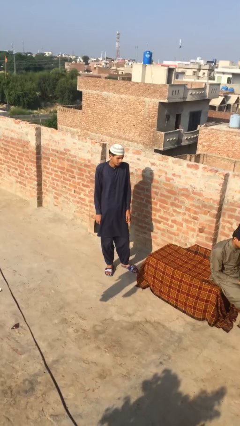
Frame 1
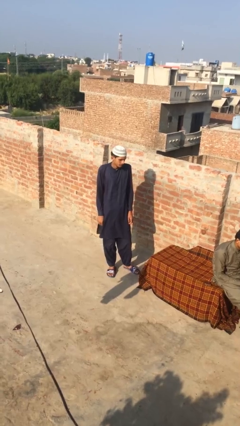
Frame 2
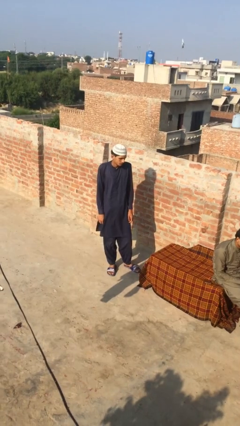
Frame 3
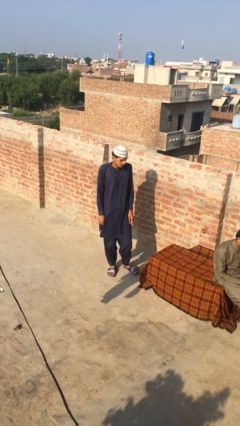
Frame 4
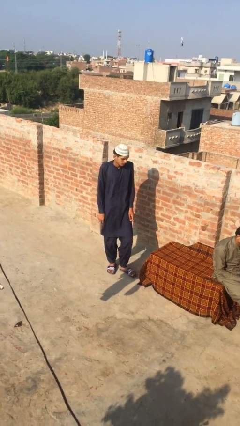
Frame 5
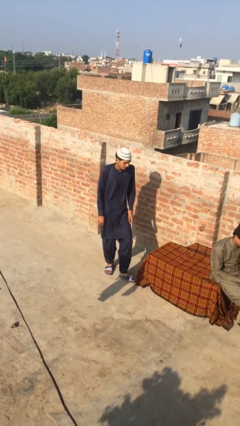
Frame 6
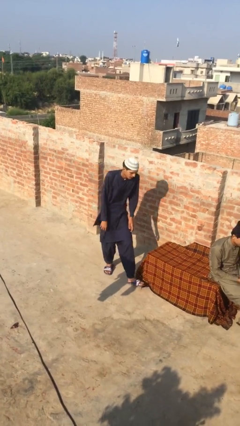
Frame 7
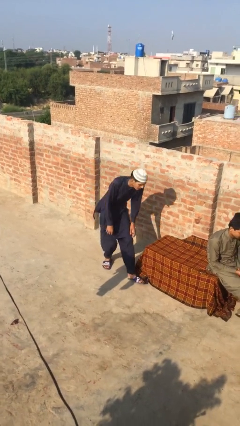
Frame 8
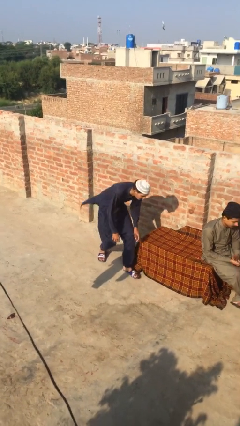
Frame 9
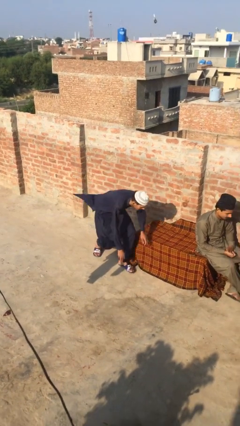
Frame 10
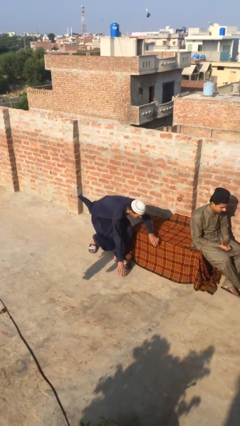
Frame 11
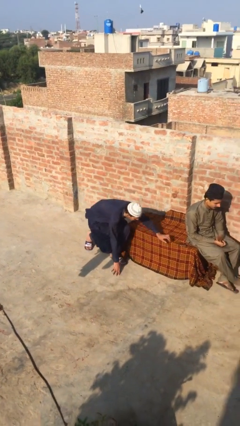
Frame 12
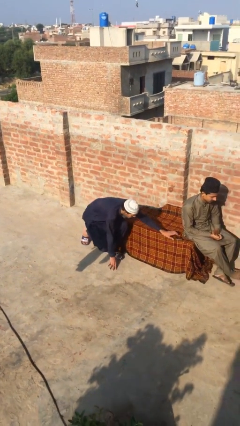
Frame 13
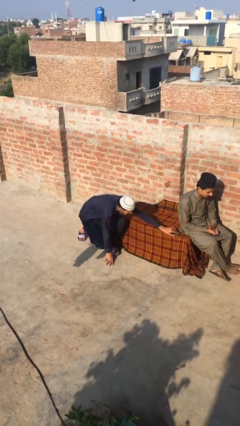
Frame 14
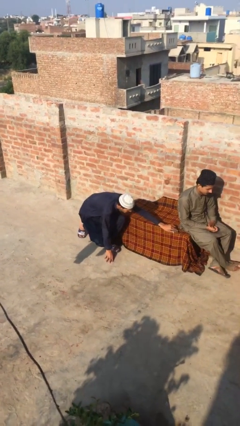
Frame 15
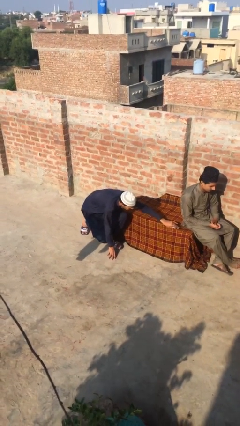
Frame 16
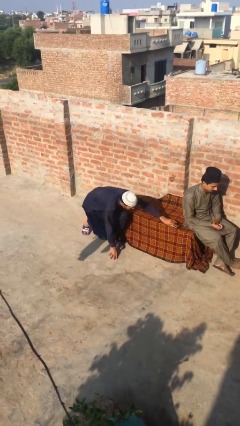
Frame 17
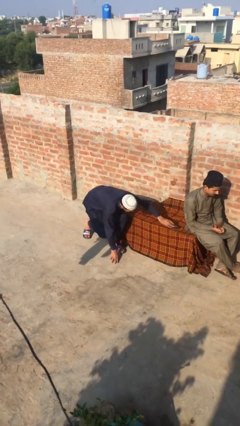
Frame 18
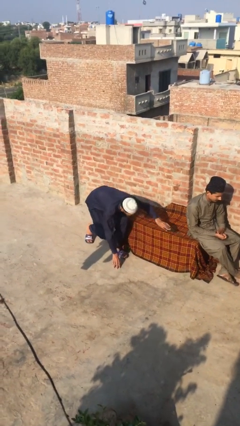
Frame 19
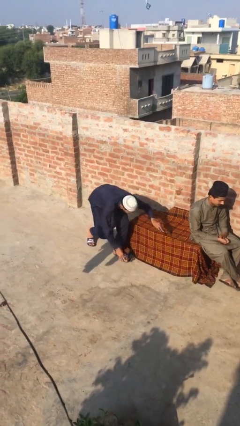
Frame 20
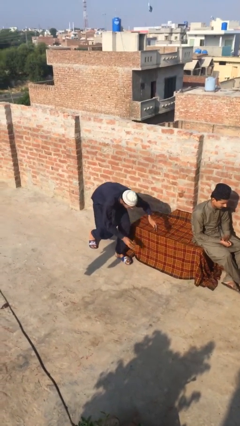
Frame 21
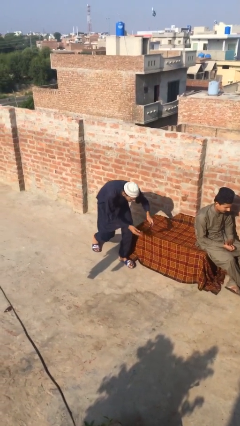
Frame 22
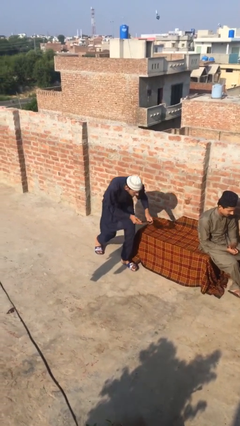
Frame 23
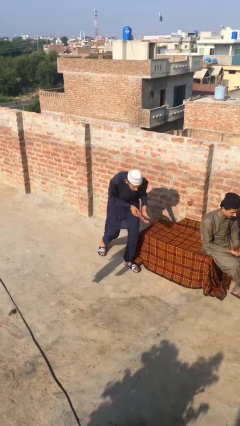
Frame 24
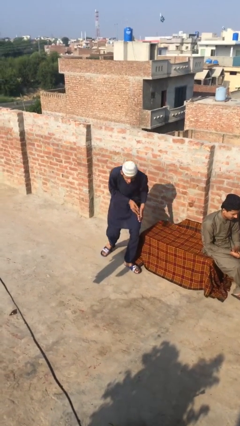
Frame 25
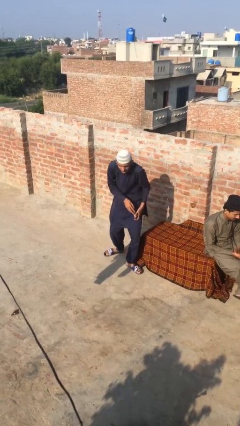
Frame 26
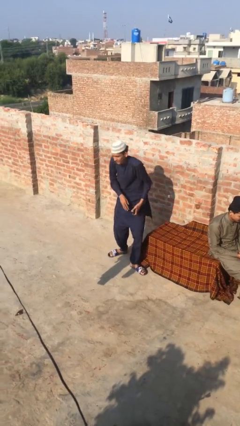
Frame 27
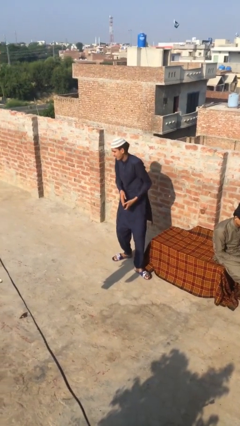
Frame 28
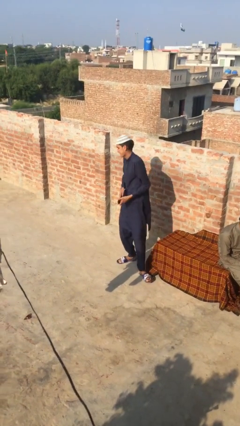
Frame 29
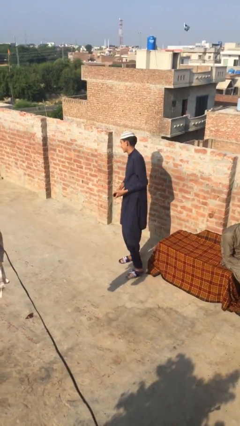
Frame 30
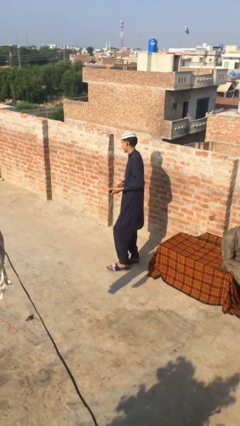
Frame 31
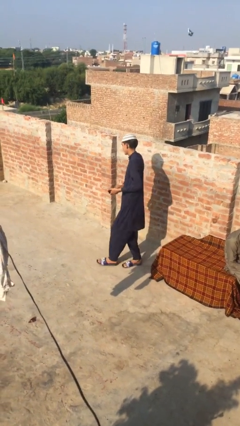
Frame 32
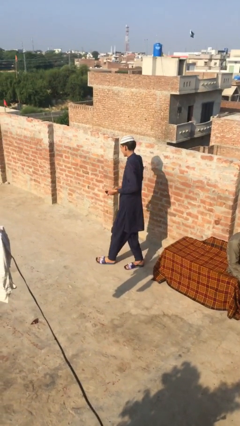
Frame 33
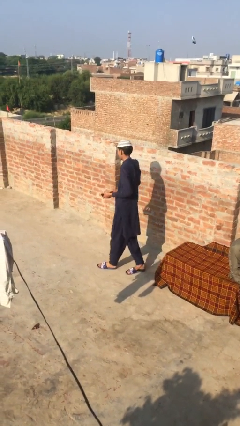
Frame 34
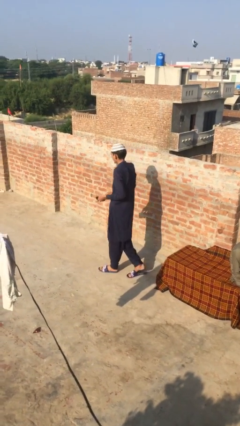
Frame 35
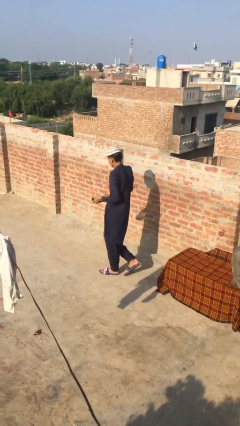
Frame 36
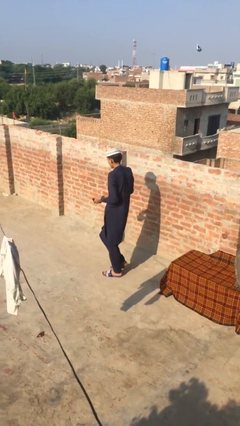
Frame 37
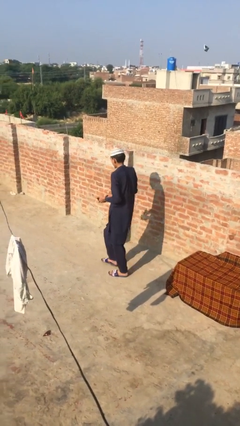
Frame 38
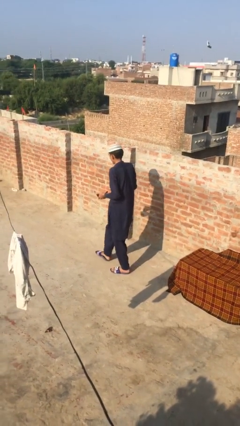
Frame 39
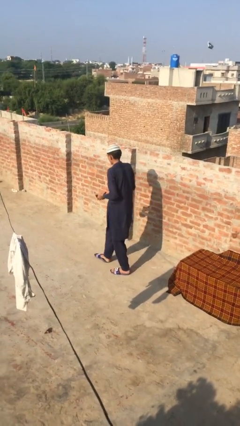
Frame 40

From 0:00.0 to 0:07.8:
person steals object from person

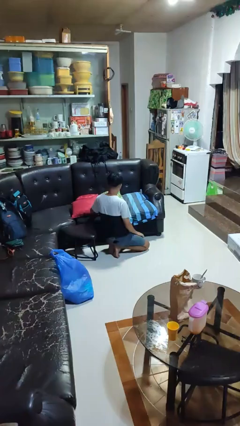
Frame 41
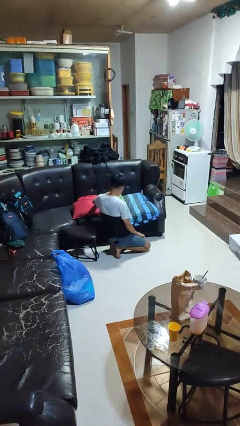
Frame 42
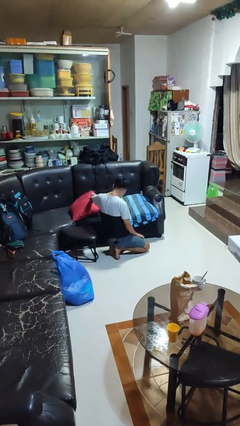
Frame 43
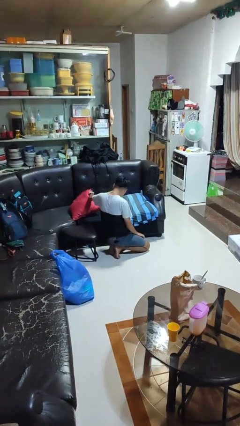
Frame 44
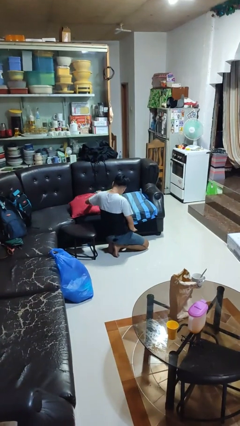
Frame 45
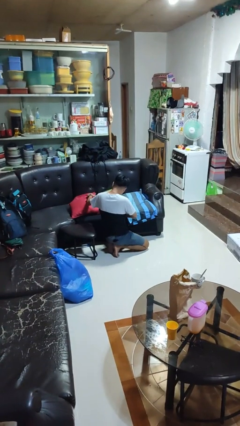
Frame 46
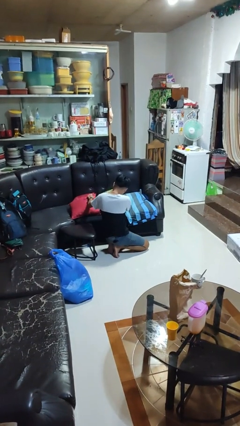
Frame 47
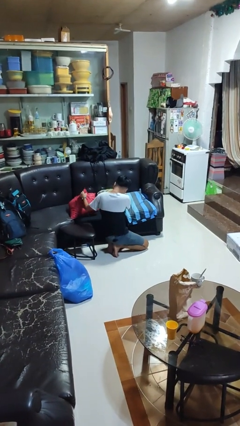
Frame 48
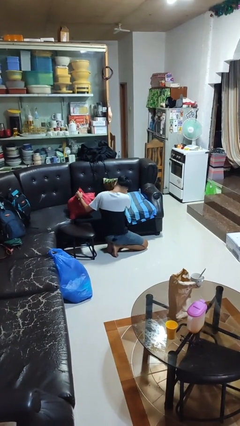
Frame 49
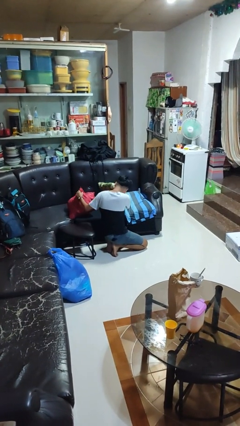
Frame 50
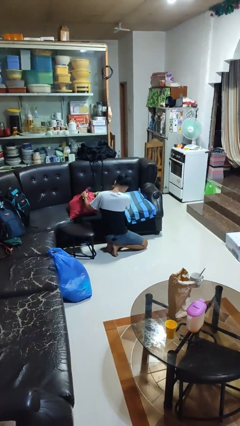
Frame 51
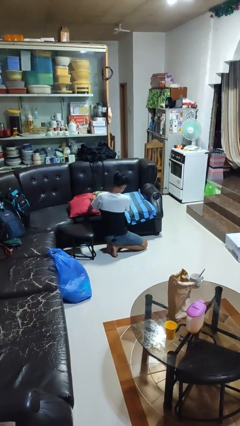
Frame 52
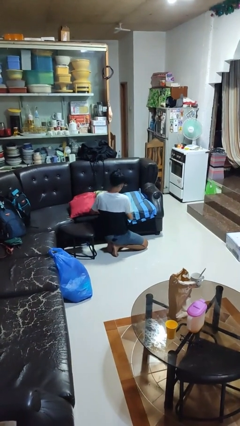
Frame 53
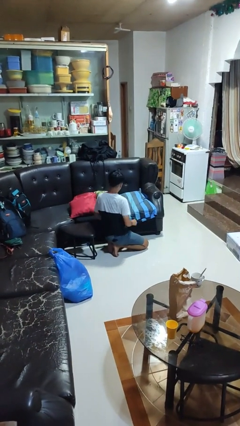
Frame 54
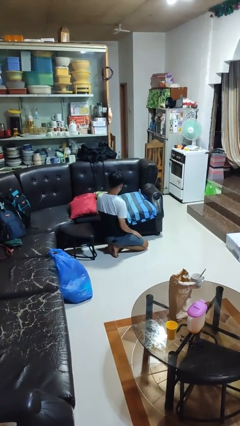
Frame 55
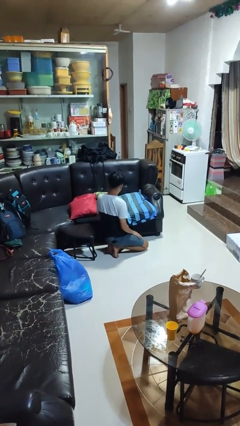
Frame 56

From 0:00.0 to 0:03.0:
person searches in couch

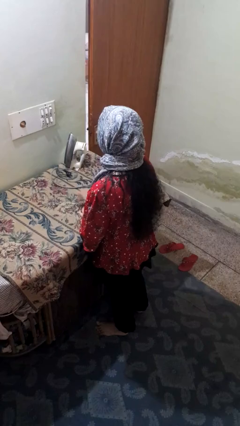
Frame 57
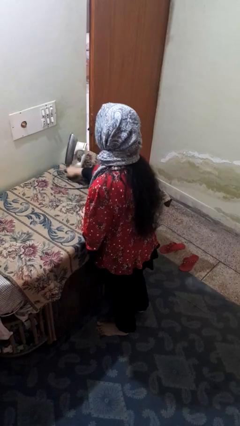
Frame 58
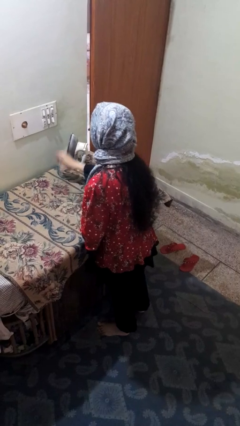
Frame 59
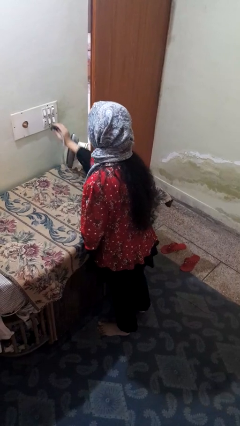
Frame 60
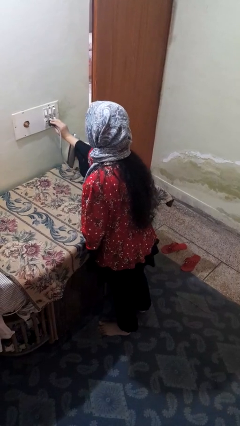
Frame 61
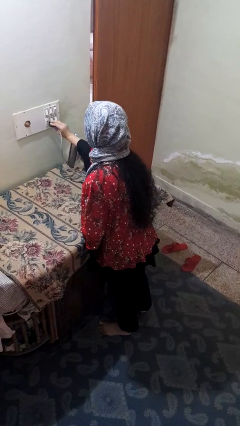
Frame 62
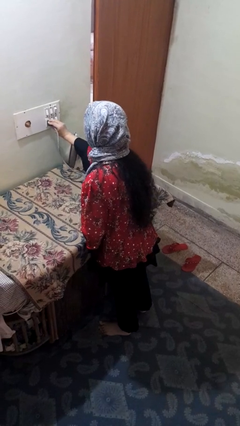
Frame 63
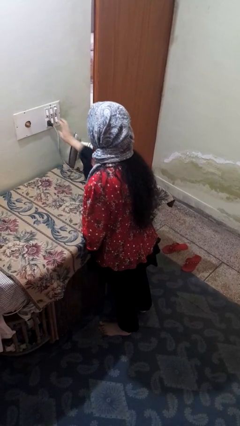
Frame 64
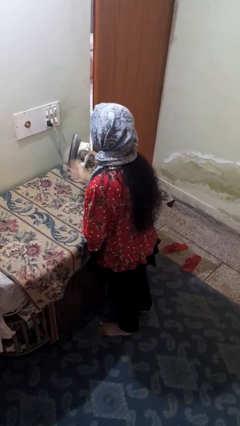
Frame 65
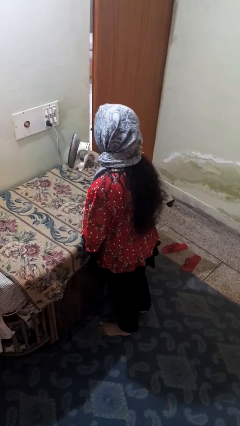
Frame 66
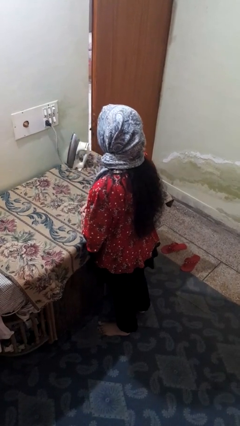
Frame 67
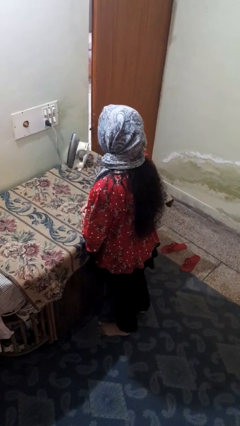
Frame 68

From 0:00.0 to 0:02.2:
person plugs into electrical socket

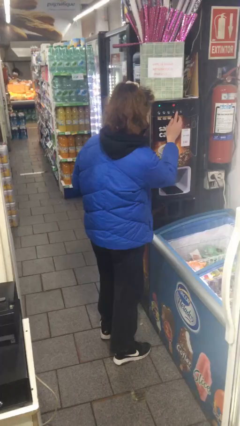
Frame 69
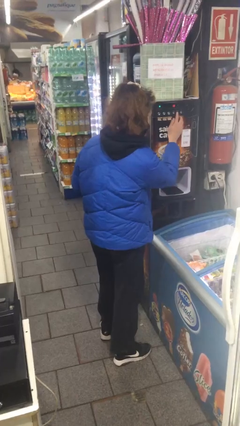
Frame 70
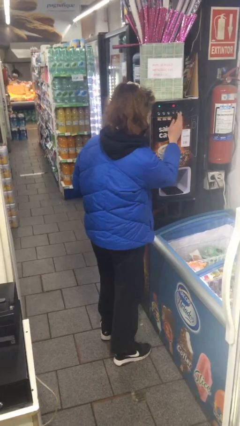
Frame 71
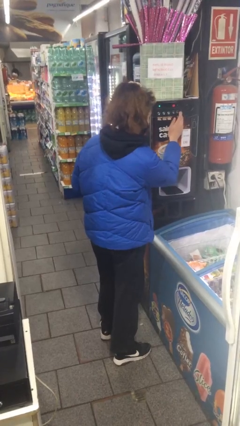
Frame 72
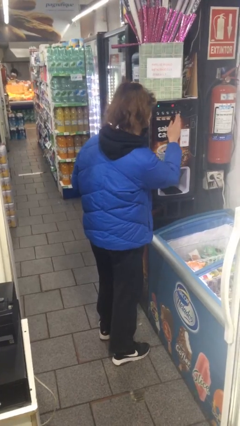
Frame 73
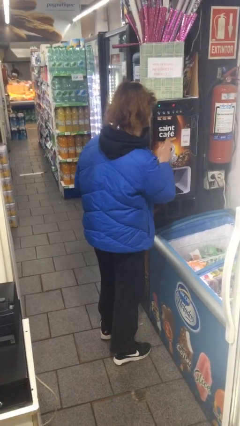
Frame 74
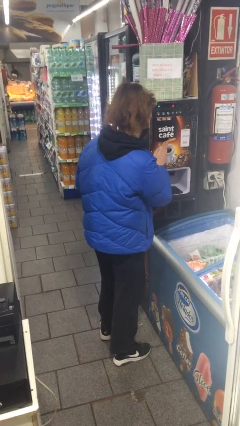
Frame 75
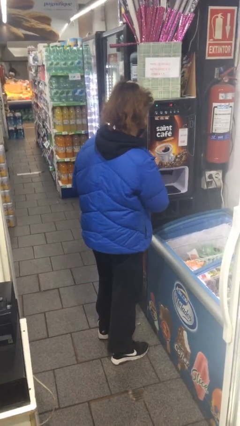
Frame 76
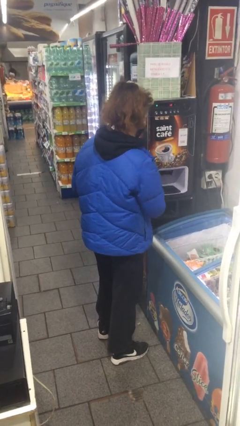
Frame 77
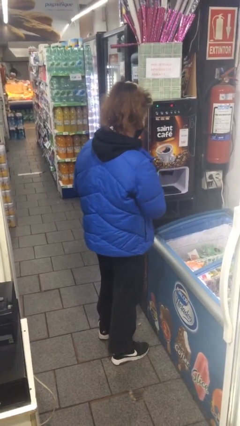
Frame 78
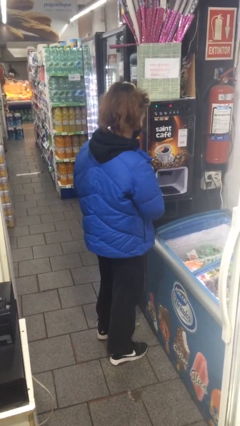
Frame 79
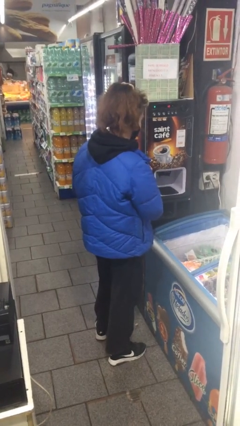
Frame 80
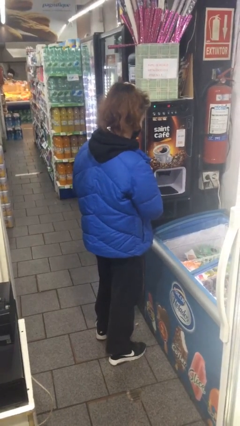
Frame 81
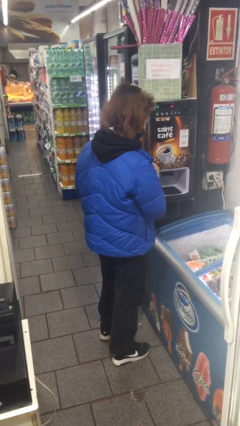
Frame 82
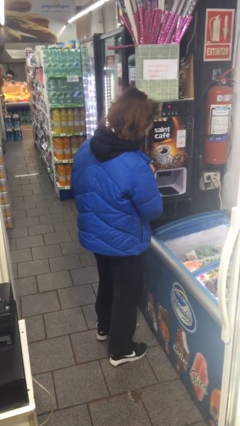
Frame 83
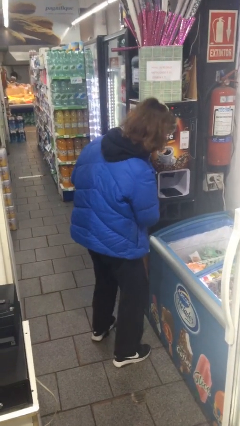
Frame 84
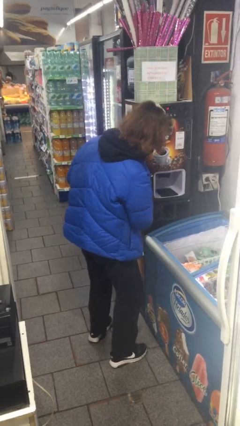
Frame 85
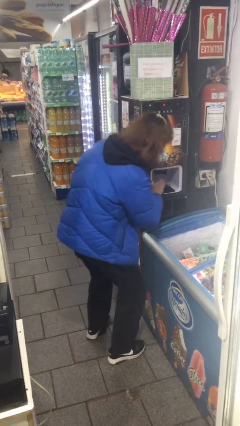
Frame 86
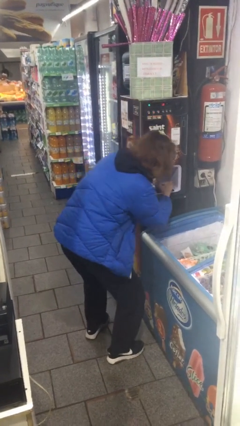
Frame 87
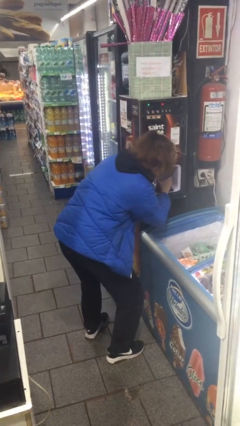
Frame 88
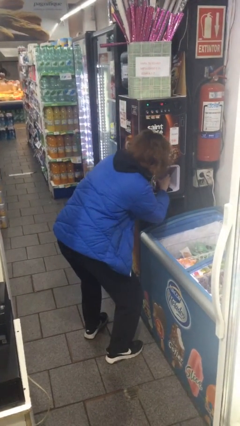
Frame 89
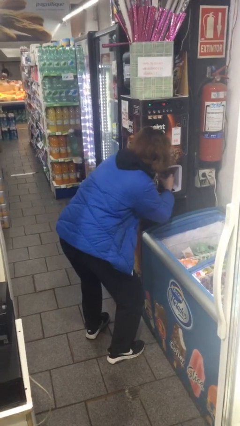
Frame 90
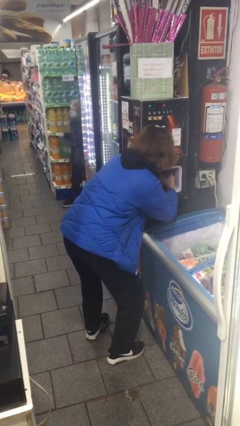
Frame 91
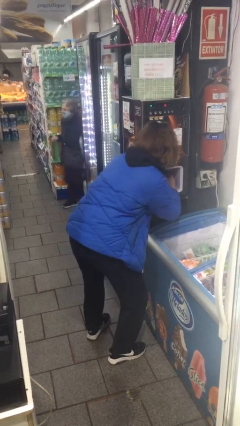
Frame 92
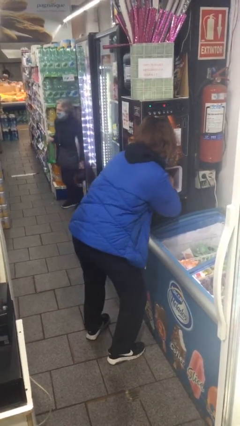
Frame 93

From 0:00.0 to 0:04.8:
person purchases from machine

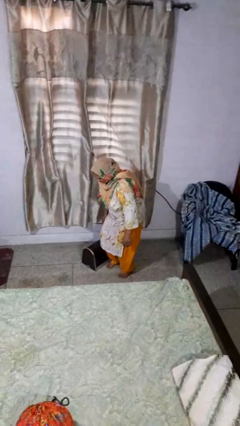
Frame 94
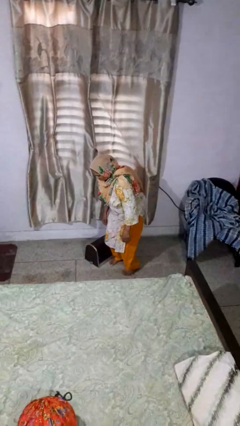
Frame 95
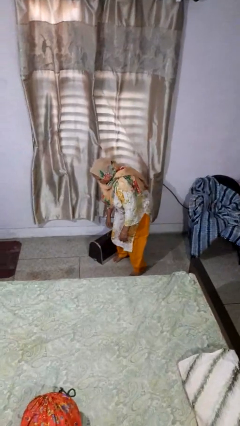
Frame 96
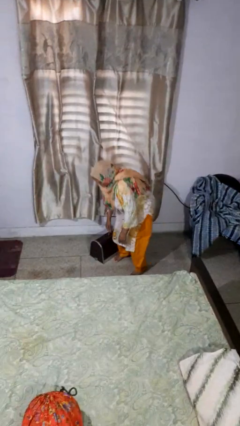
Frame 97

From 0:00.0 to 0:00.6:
person trips on object on floor
